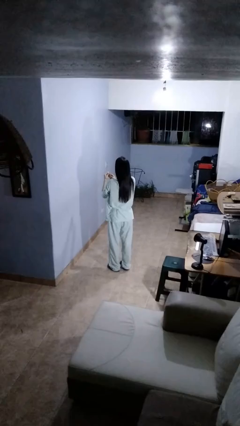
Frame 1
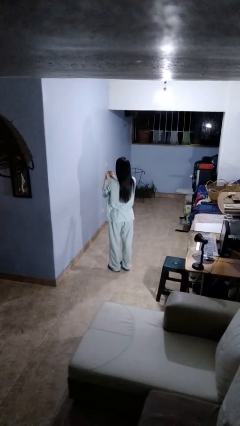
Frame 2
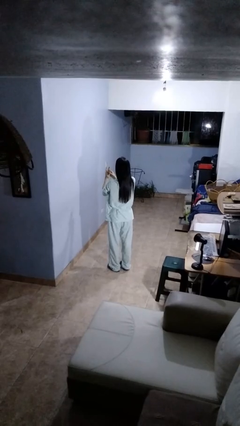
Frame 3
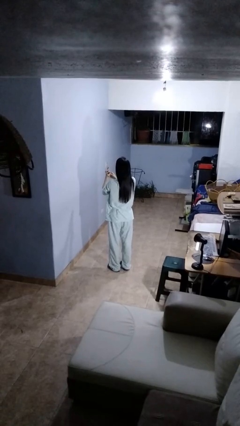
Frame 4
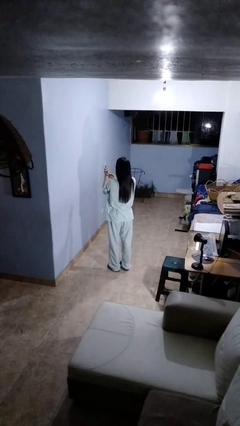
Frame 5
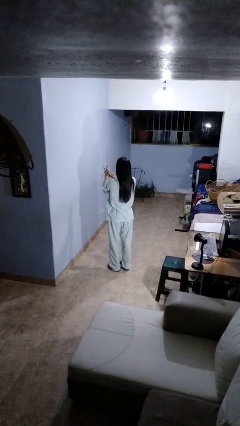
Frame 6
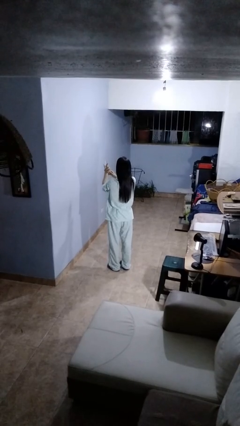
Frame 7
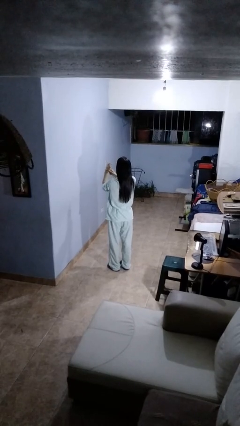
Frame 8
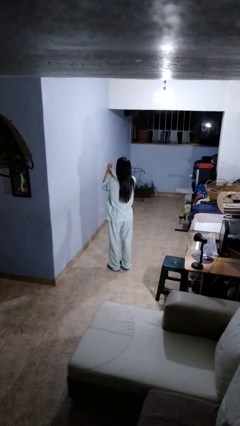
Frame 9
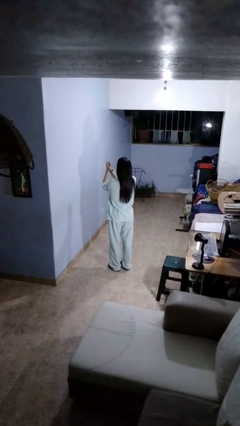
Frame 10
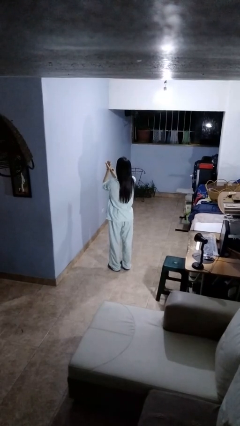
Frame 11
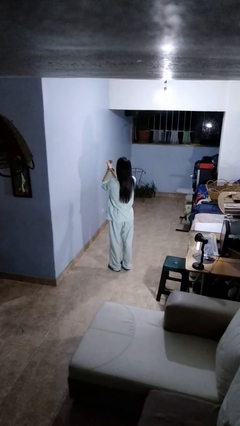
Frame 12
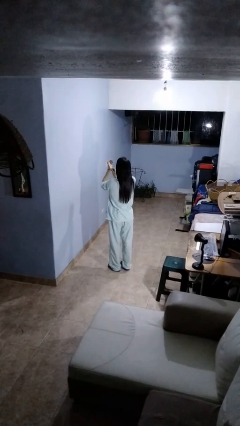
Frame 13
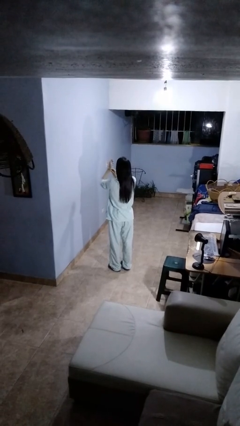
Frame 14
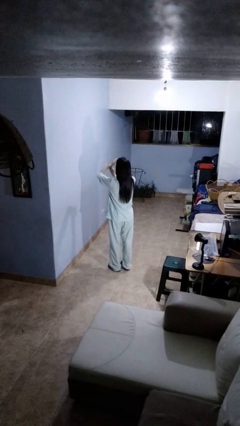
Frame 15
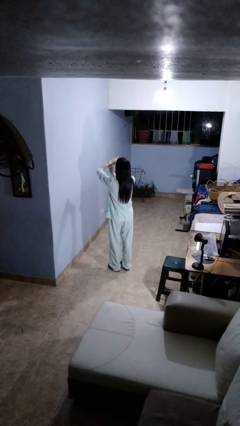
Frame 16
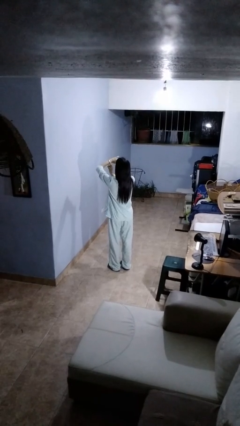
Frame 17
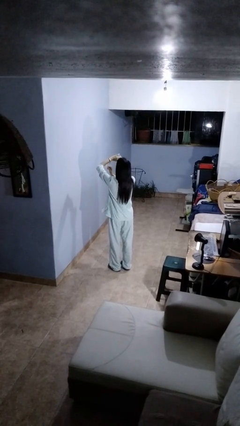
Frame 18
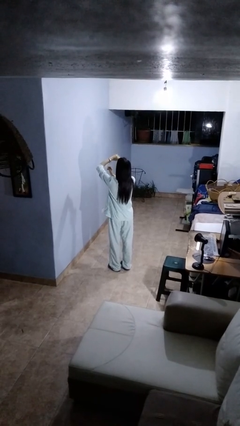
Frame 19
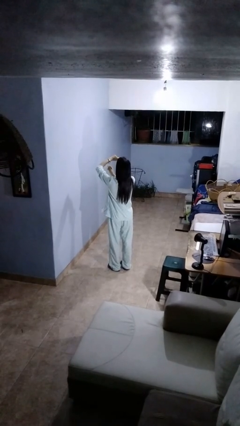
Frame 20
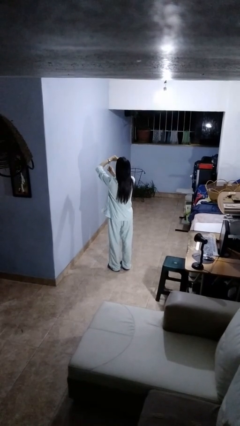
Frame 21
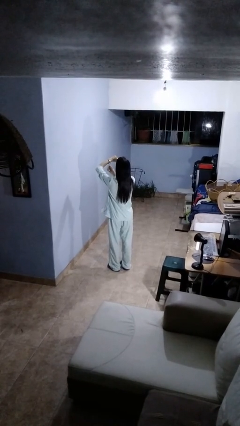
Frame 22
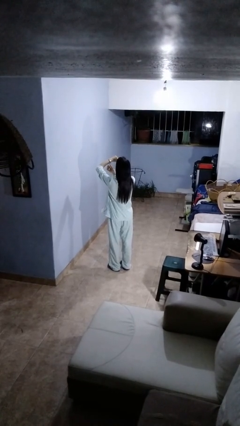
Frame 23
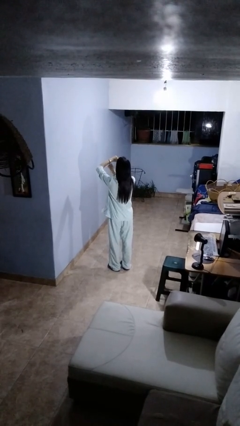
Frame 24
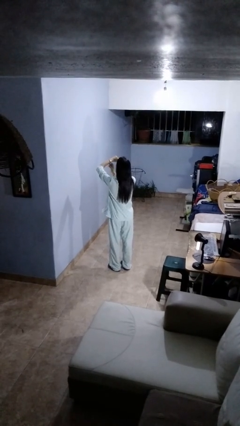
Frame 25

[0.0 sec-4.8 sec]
person puts on wristwatch

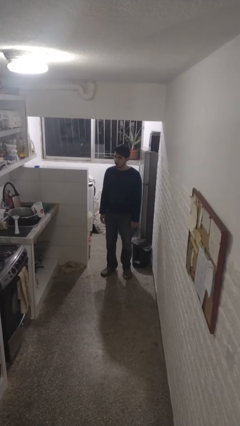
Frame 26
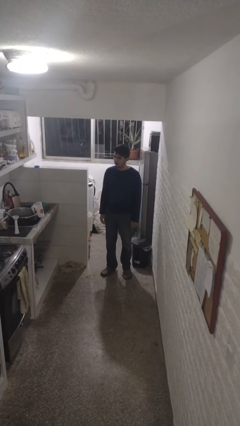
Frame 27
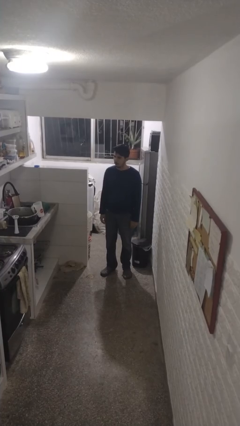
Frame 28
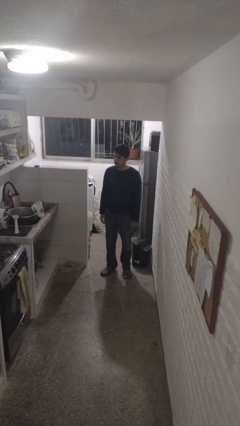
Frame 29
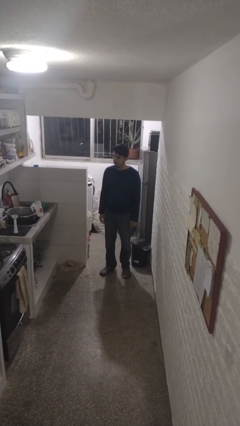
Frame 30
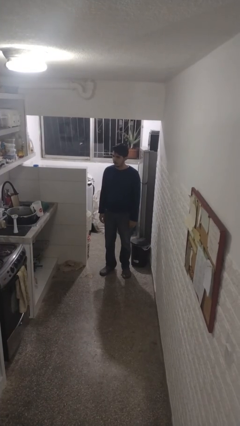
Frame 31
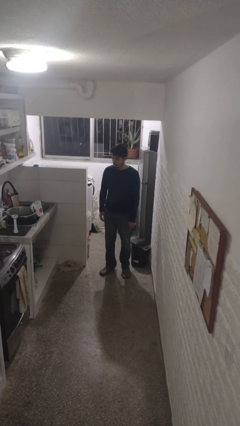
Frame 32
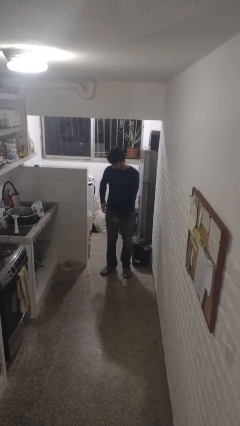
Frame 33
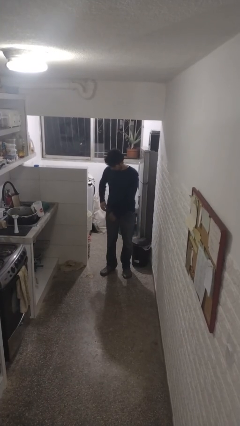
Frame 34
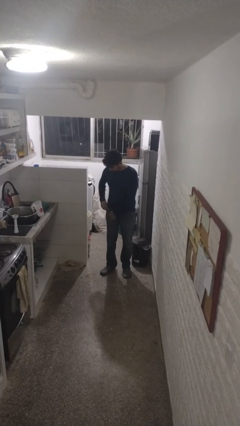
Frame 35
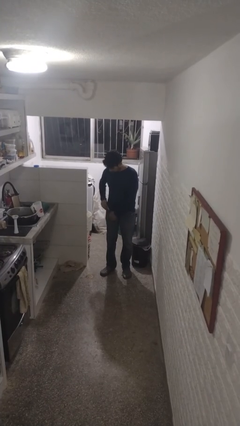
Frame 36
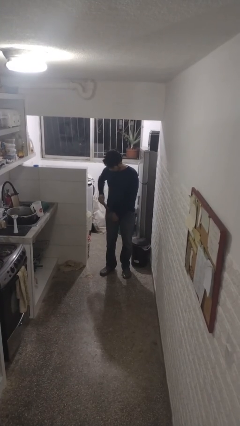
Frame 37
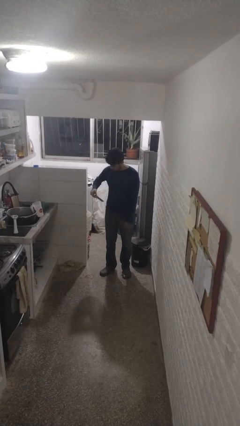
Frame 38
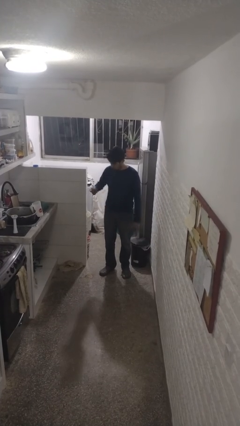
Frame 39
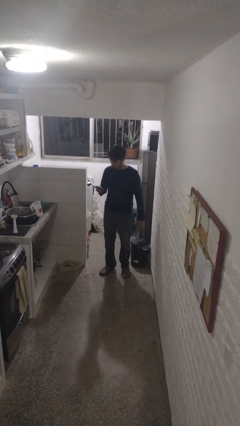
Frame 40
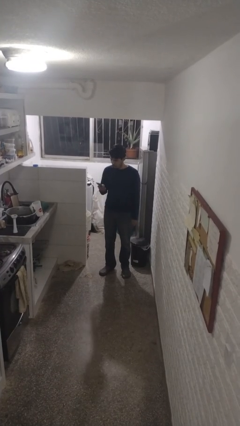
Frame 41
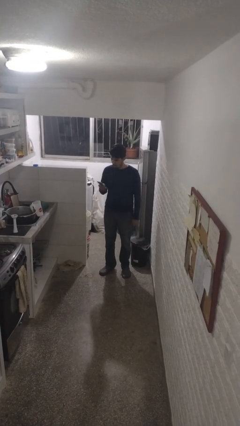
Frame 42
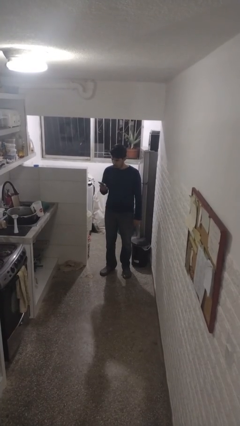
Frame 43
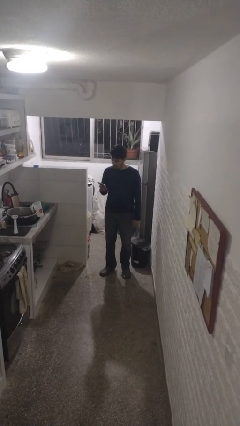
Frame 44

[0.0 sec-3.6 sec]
person takes phone from pocket

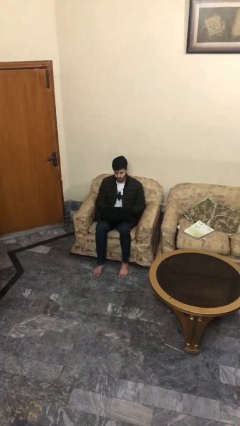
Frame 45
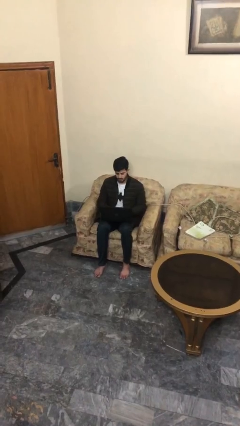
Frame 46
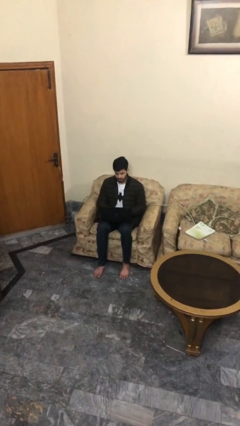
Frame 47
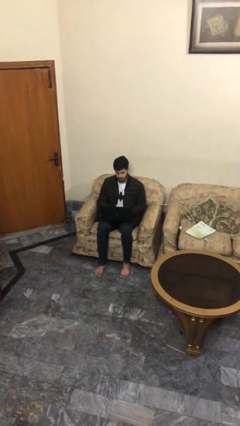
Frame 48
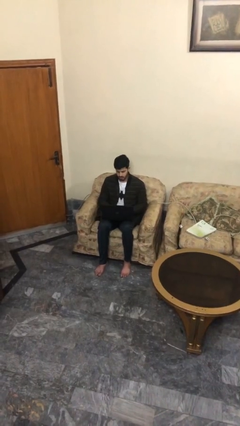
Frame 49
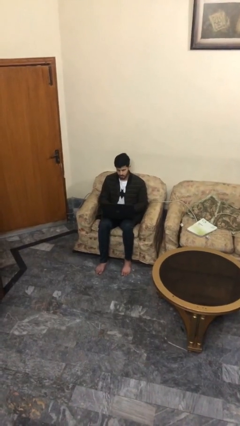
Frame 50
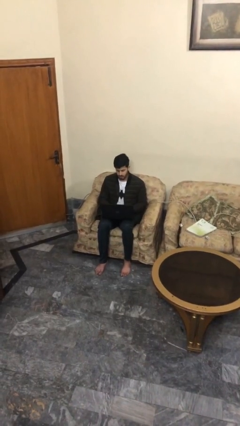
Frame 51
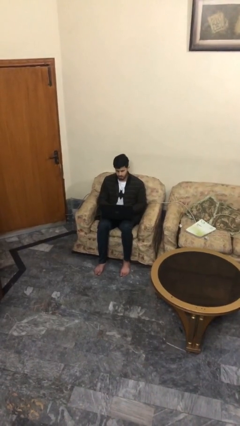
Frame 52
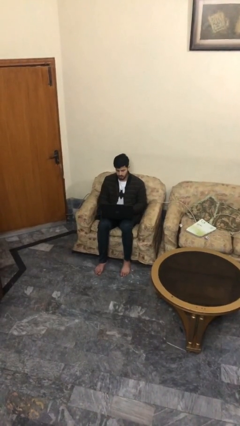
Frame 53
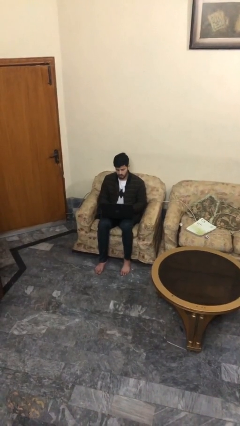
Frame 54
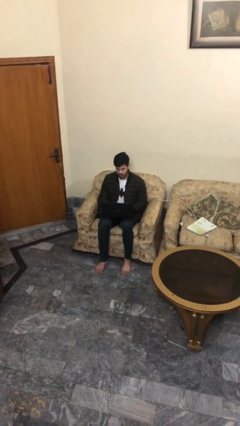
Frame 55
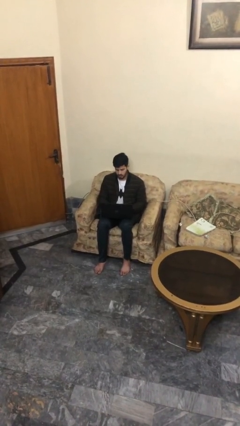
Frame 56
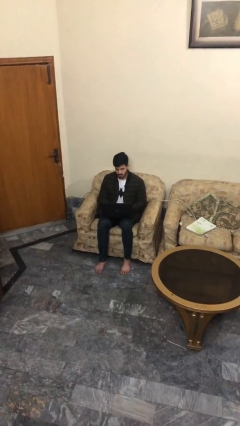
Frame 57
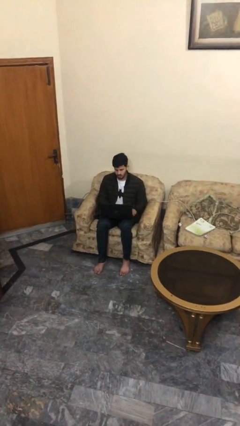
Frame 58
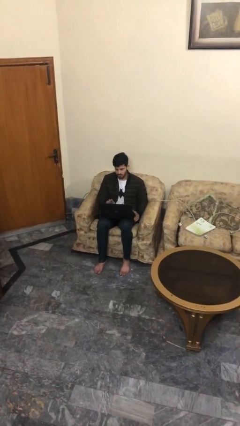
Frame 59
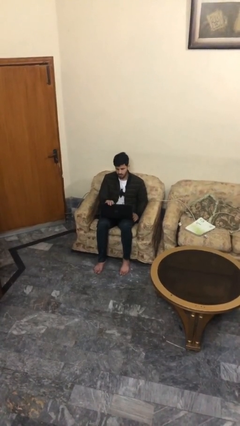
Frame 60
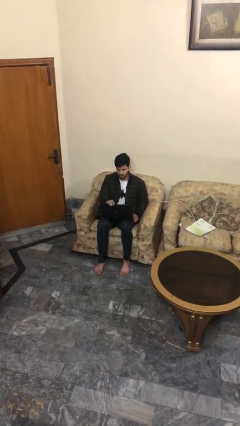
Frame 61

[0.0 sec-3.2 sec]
person interacts with laptop

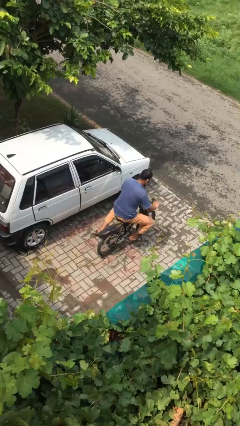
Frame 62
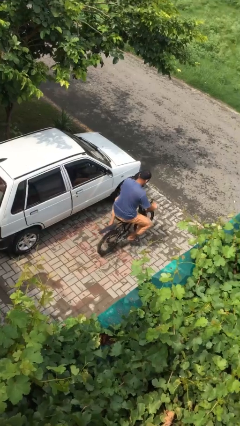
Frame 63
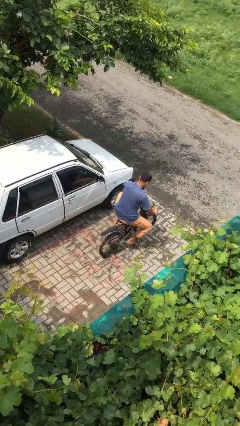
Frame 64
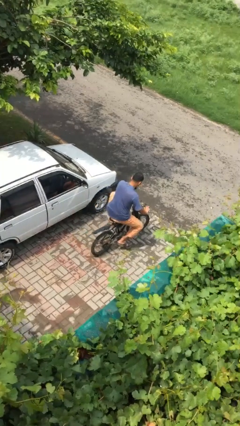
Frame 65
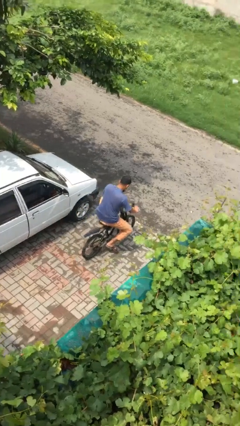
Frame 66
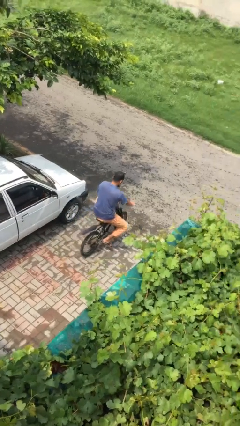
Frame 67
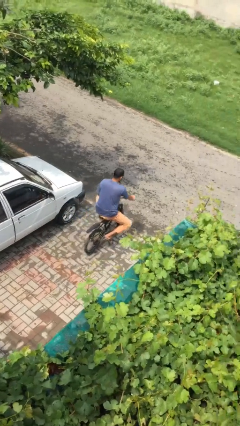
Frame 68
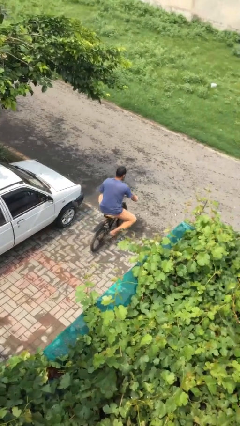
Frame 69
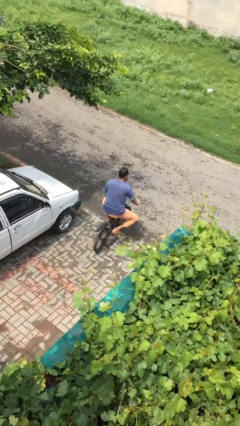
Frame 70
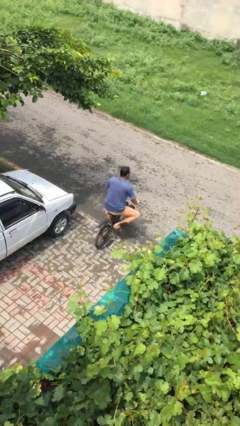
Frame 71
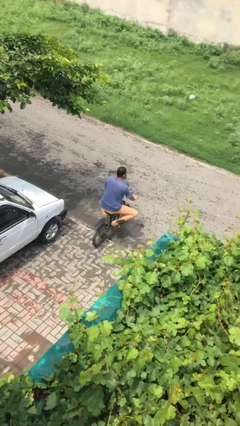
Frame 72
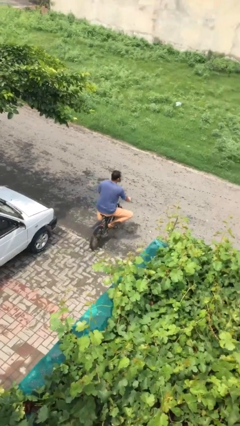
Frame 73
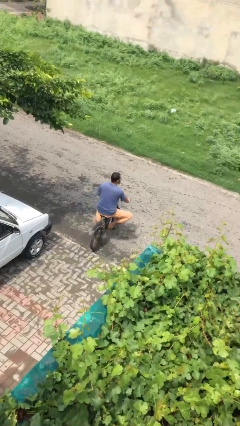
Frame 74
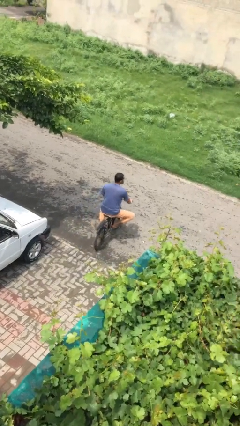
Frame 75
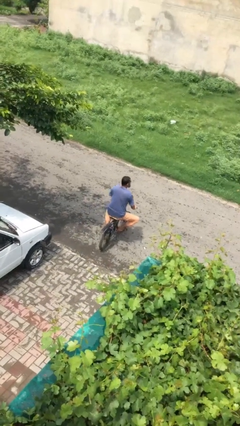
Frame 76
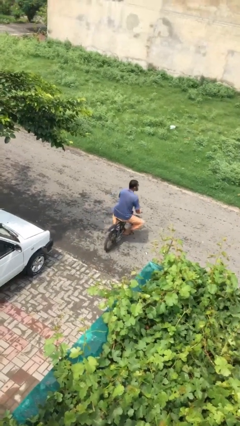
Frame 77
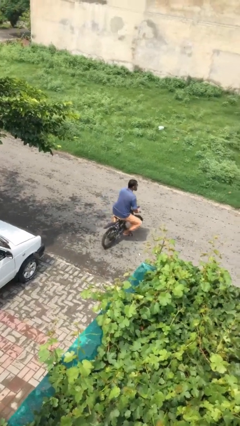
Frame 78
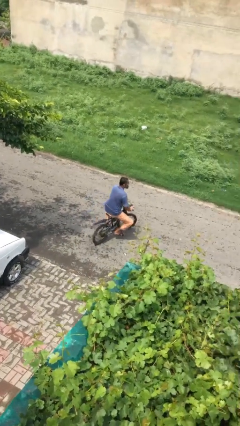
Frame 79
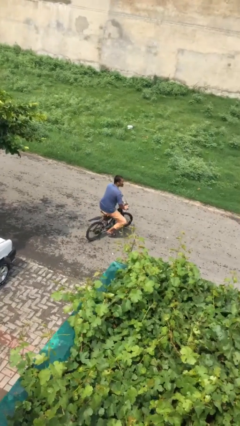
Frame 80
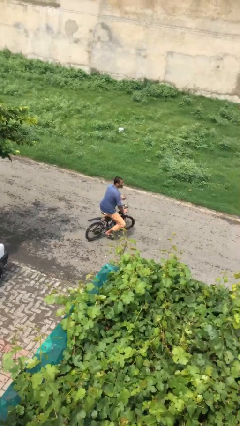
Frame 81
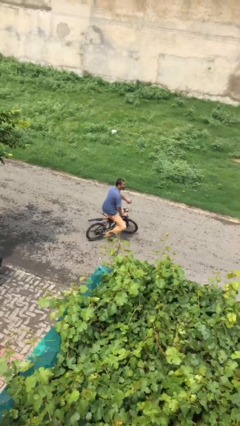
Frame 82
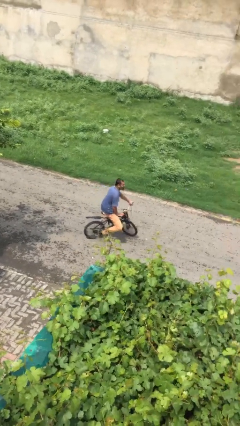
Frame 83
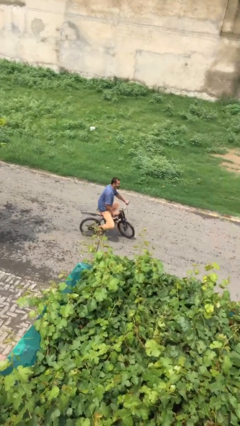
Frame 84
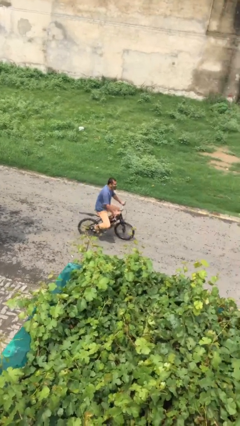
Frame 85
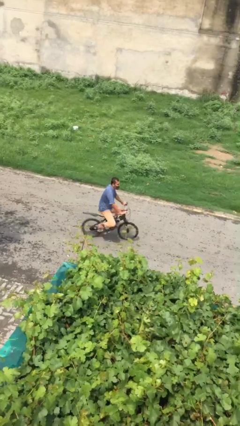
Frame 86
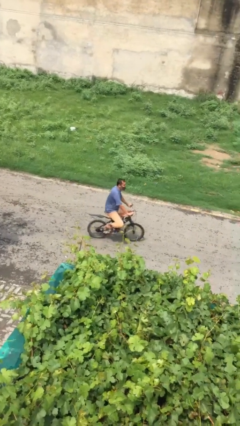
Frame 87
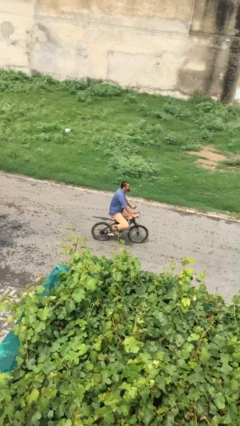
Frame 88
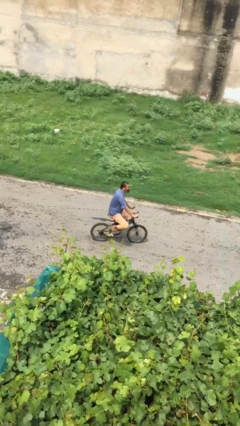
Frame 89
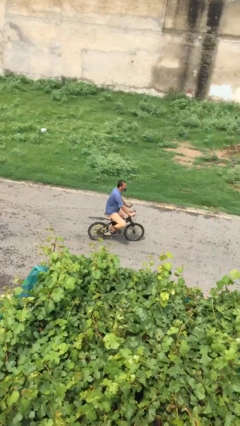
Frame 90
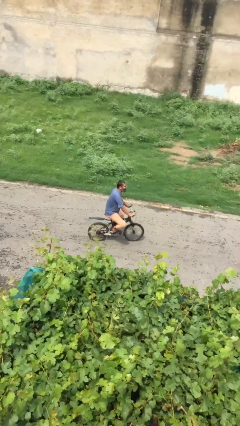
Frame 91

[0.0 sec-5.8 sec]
person rides bicycle

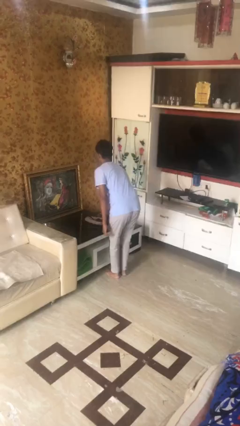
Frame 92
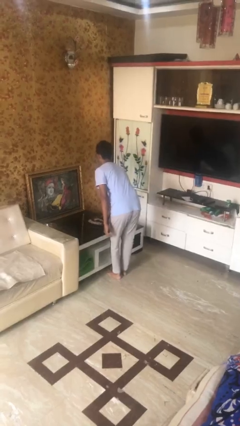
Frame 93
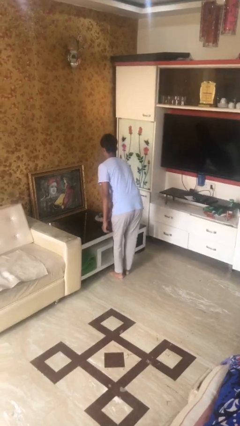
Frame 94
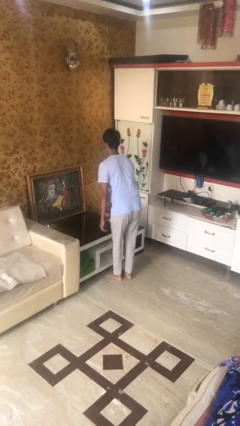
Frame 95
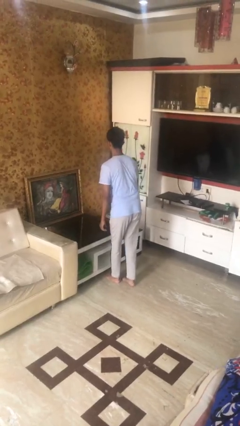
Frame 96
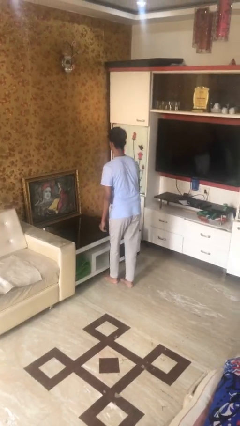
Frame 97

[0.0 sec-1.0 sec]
person picks up object from table
